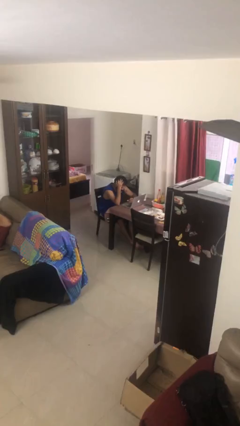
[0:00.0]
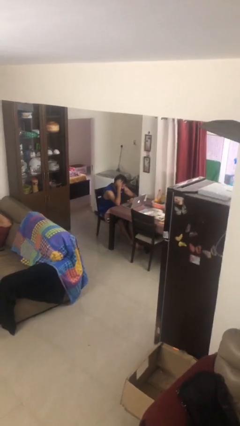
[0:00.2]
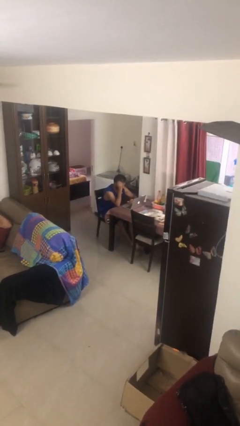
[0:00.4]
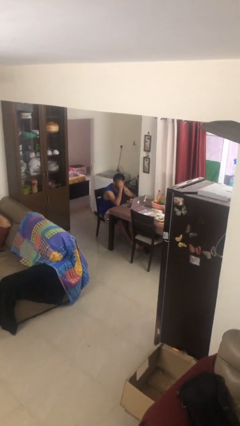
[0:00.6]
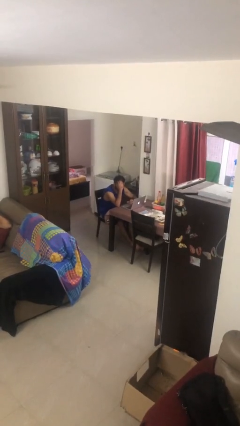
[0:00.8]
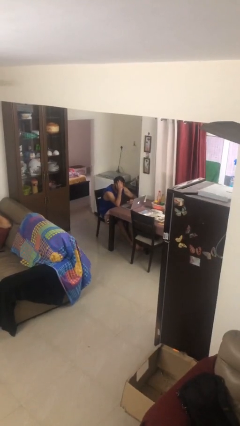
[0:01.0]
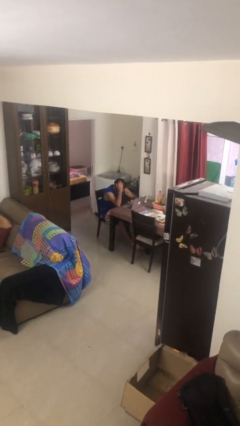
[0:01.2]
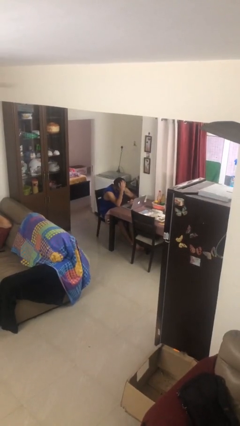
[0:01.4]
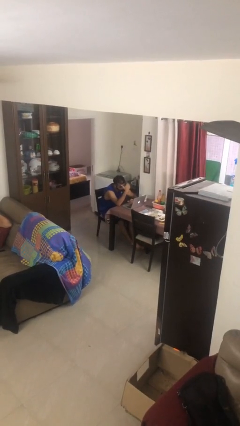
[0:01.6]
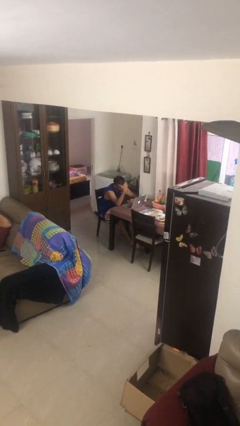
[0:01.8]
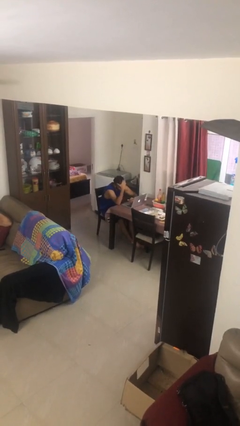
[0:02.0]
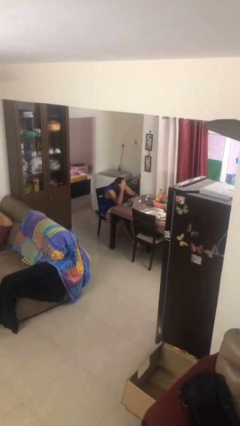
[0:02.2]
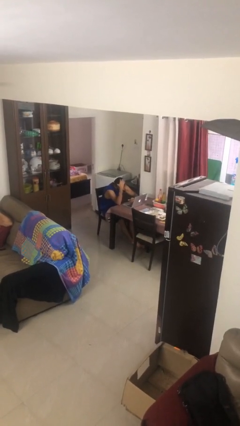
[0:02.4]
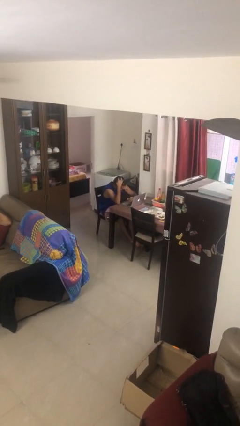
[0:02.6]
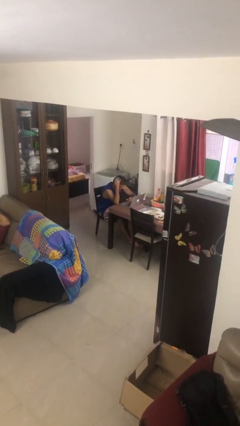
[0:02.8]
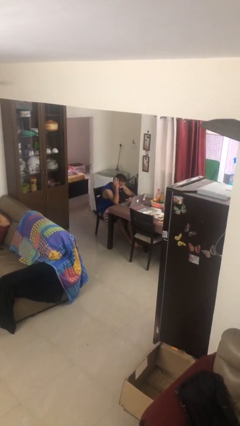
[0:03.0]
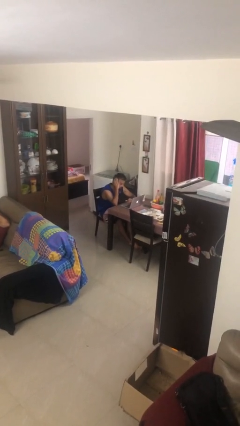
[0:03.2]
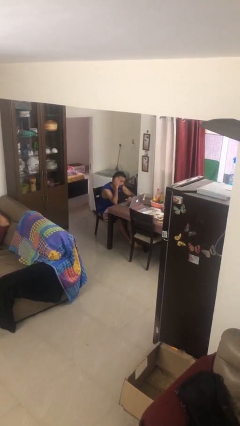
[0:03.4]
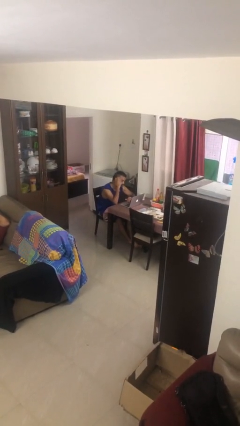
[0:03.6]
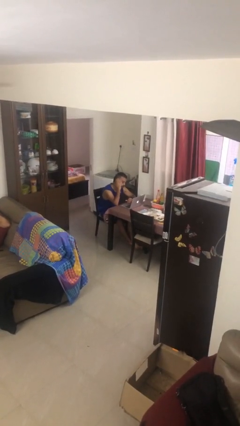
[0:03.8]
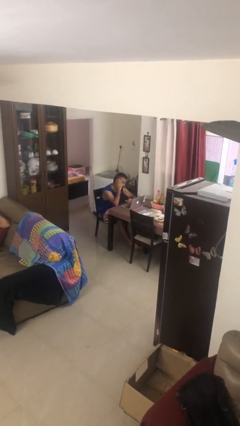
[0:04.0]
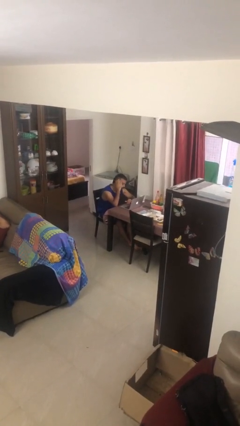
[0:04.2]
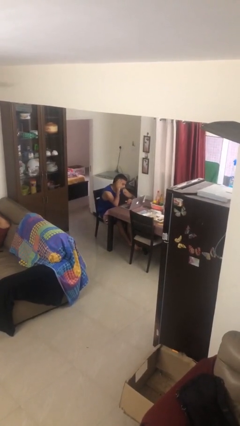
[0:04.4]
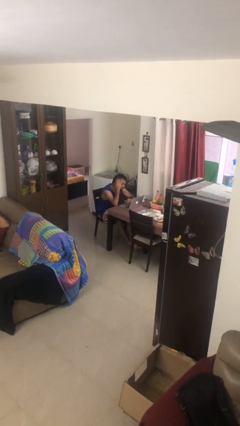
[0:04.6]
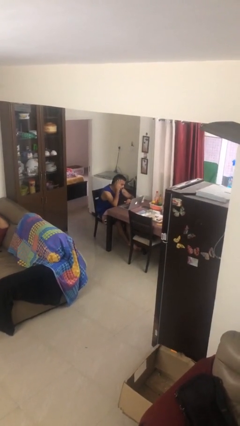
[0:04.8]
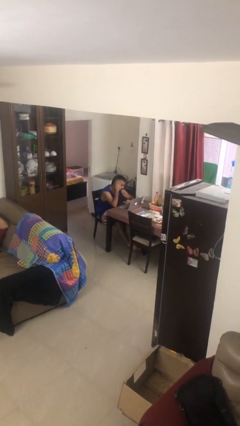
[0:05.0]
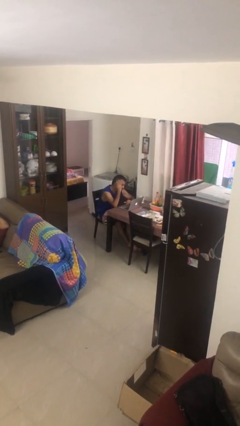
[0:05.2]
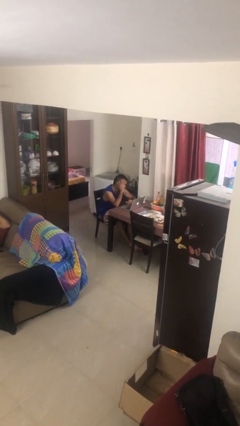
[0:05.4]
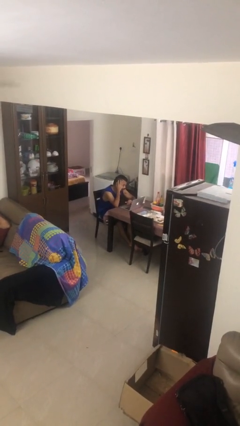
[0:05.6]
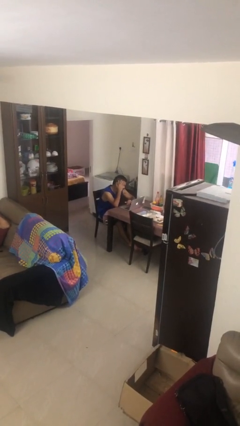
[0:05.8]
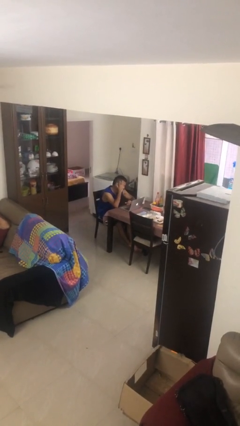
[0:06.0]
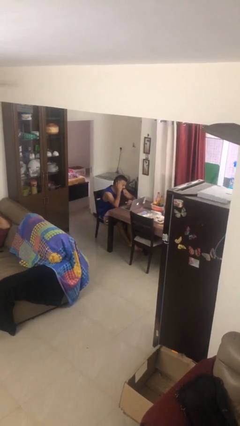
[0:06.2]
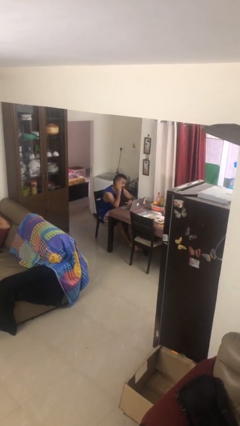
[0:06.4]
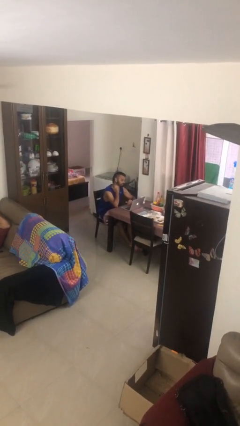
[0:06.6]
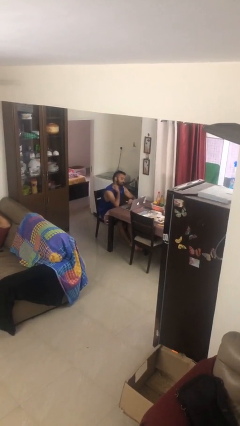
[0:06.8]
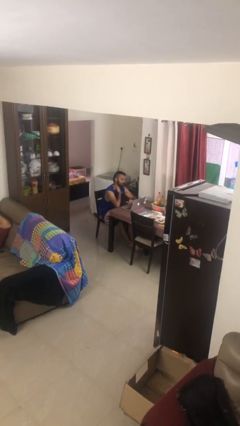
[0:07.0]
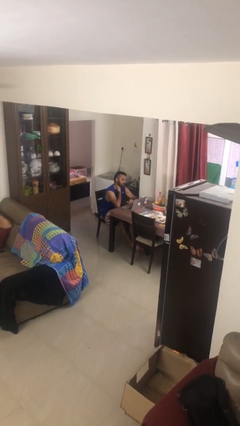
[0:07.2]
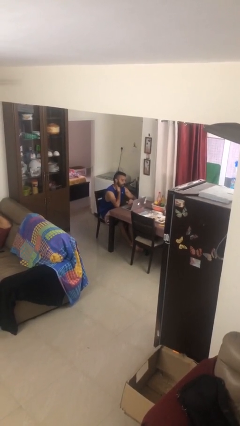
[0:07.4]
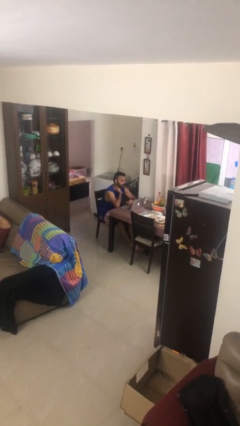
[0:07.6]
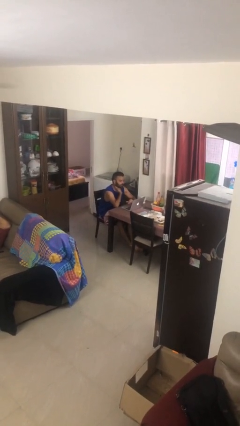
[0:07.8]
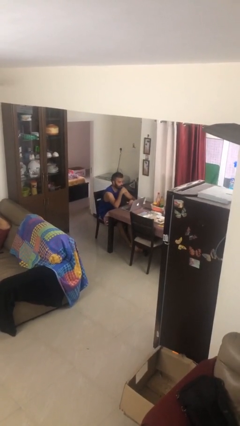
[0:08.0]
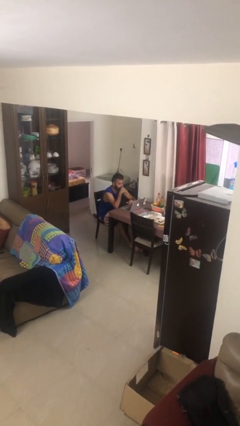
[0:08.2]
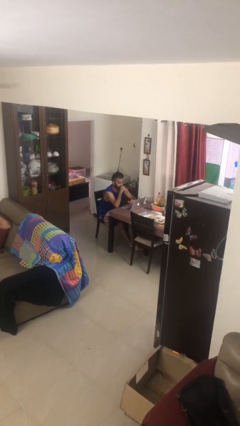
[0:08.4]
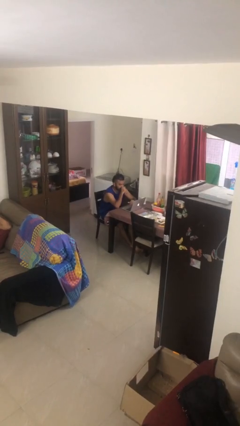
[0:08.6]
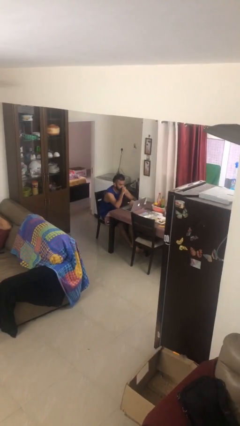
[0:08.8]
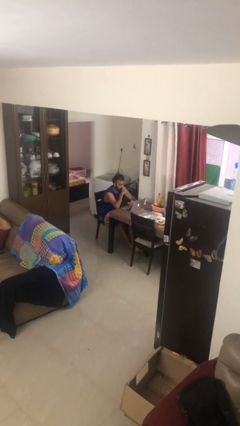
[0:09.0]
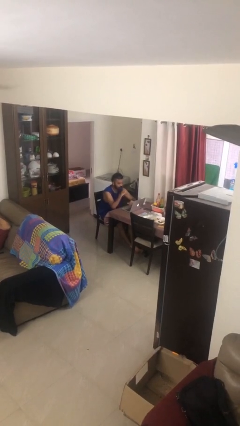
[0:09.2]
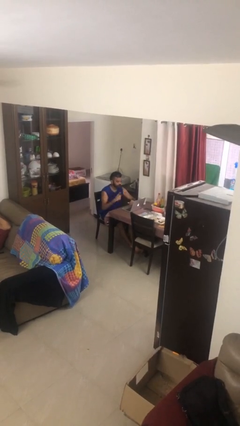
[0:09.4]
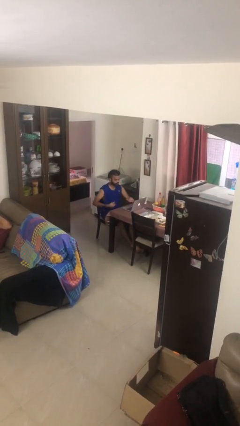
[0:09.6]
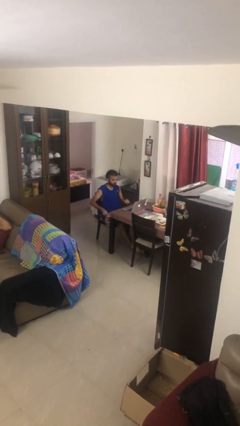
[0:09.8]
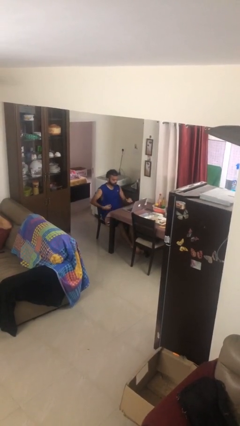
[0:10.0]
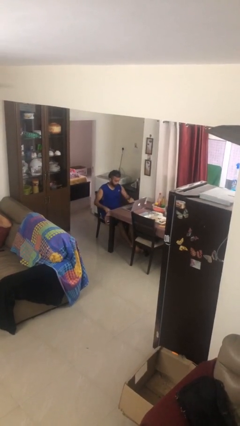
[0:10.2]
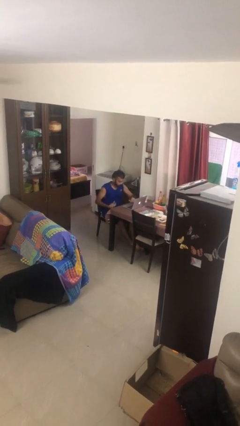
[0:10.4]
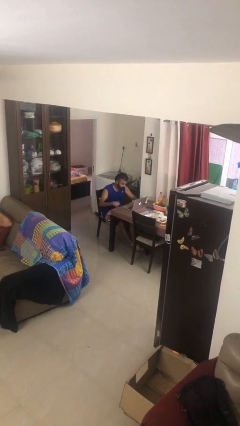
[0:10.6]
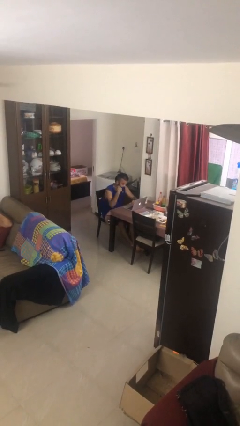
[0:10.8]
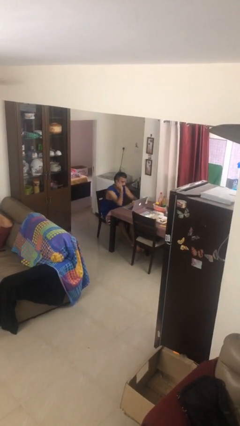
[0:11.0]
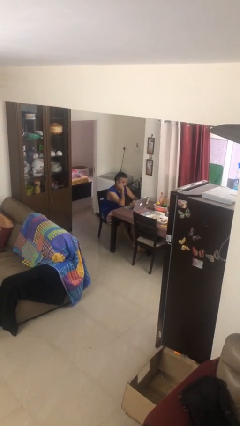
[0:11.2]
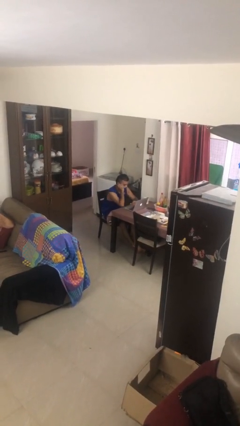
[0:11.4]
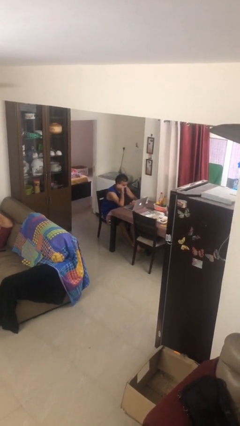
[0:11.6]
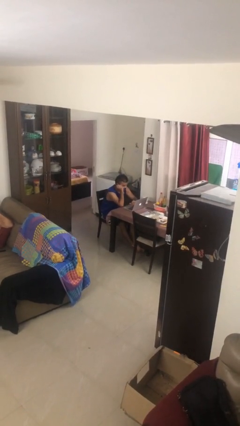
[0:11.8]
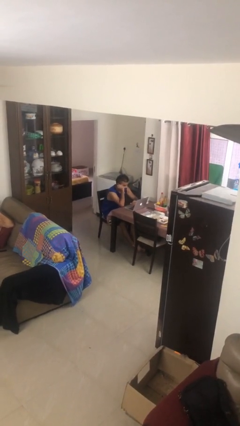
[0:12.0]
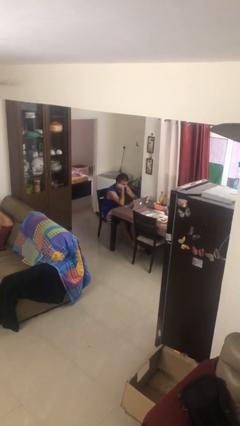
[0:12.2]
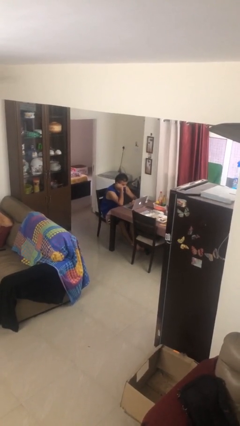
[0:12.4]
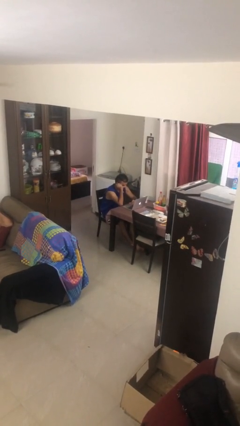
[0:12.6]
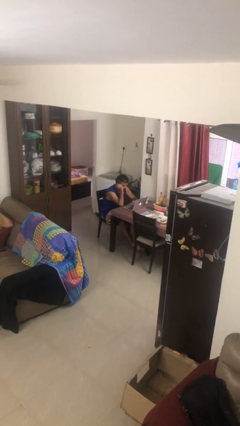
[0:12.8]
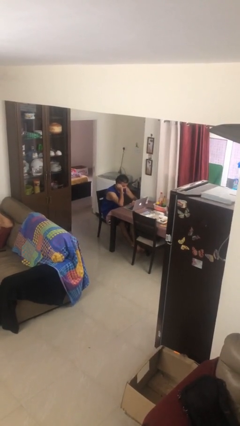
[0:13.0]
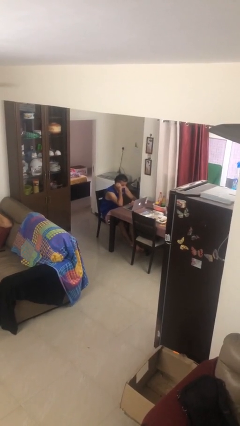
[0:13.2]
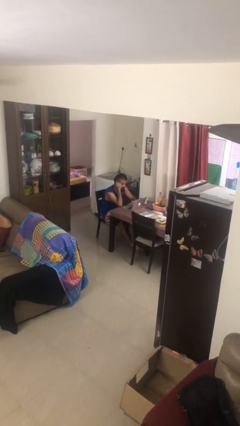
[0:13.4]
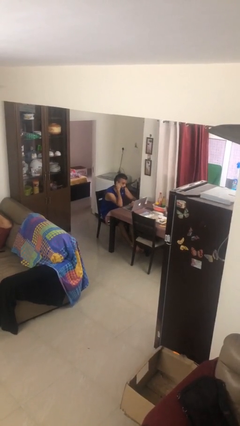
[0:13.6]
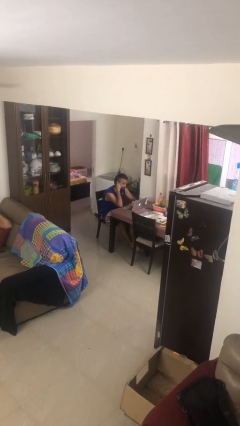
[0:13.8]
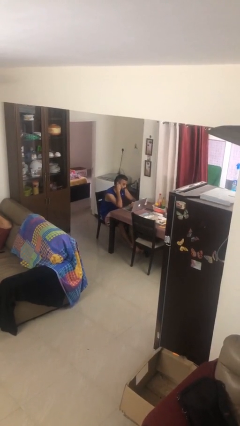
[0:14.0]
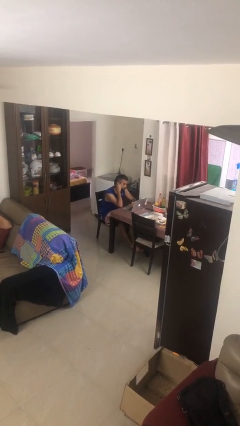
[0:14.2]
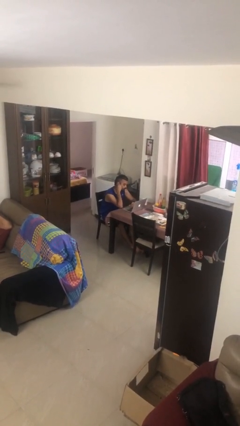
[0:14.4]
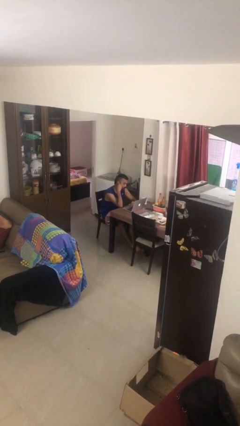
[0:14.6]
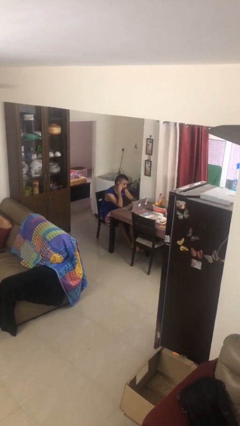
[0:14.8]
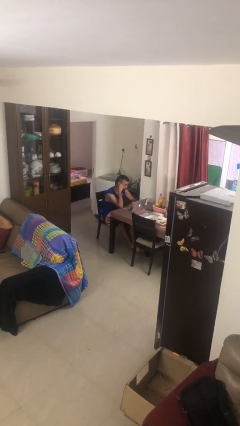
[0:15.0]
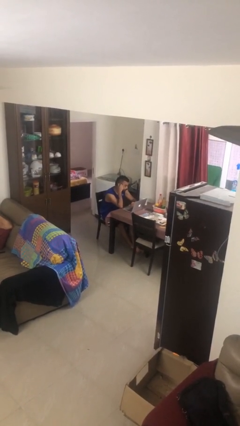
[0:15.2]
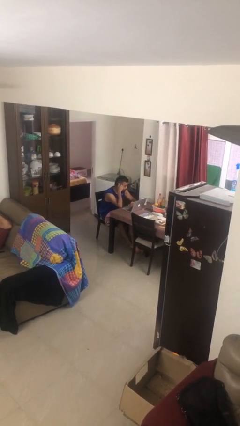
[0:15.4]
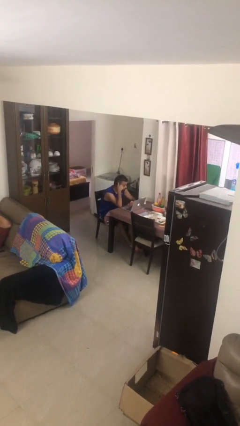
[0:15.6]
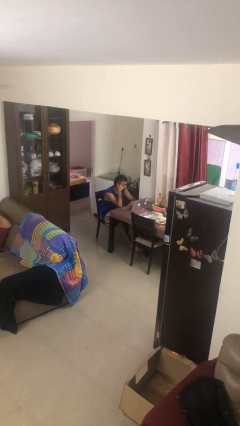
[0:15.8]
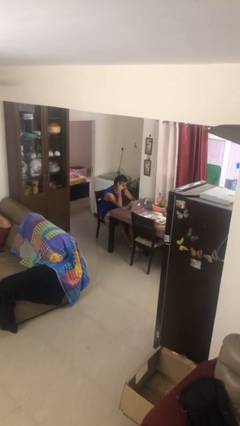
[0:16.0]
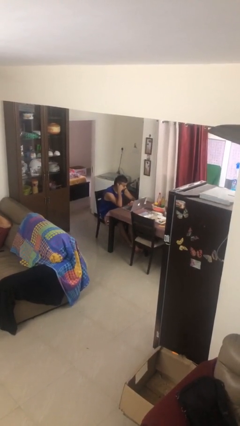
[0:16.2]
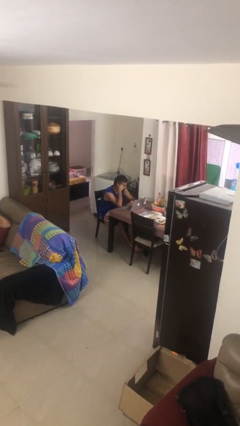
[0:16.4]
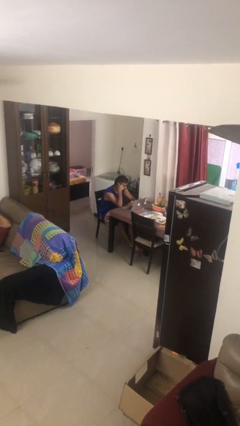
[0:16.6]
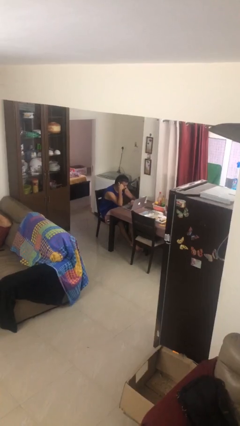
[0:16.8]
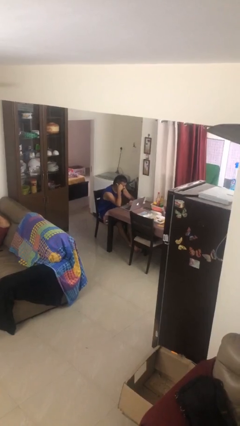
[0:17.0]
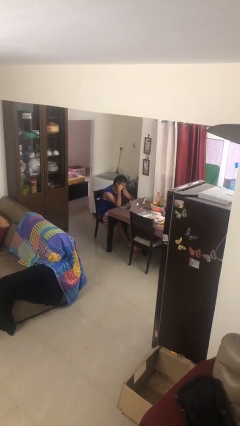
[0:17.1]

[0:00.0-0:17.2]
person interacts with laptop

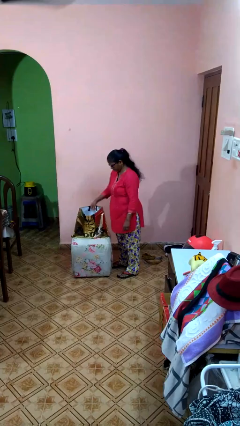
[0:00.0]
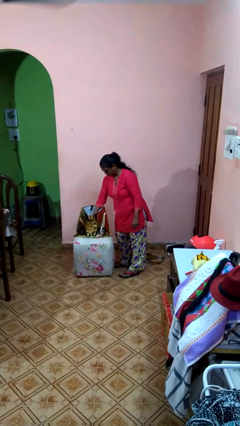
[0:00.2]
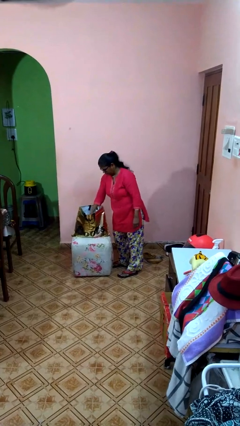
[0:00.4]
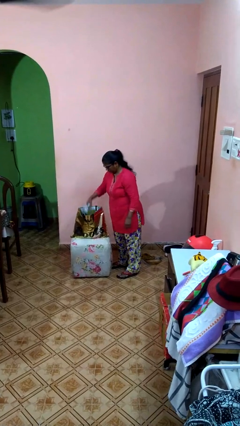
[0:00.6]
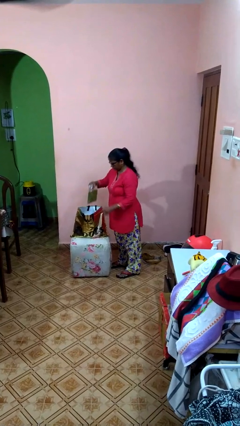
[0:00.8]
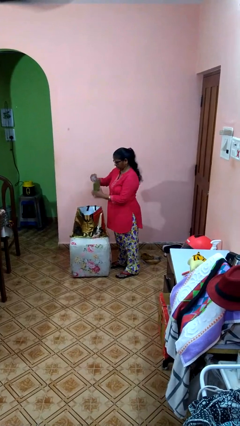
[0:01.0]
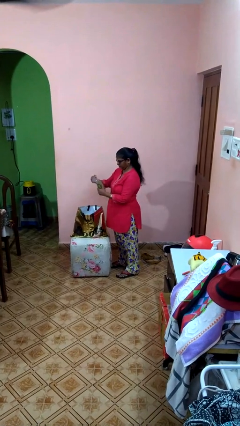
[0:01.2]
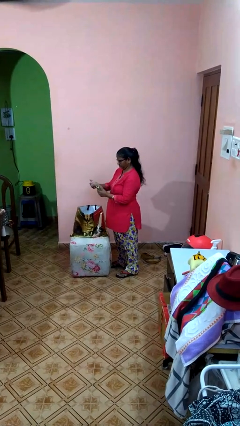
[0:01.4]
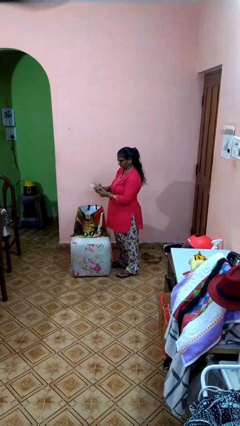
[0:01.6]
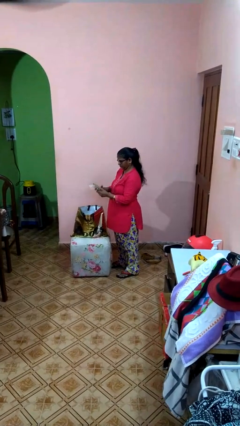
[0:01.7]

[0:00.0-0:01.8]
person takes object from bag
